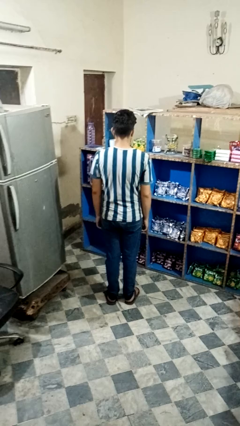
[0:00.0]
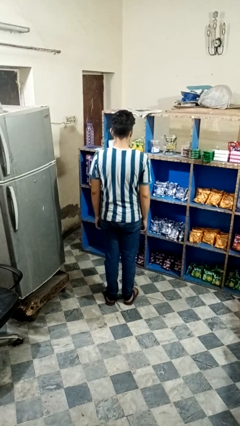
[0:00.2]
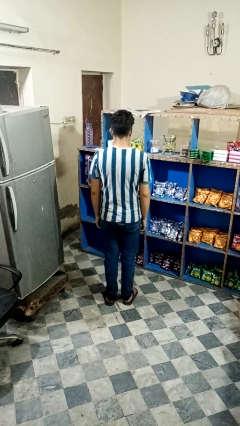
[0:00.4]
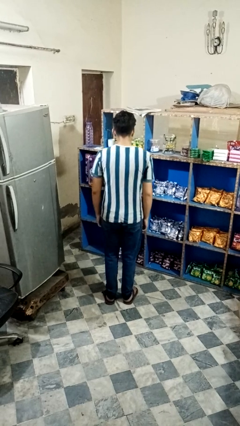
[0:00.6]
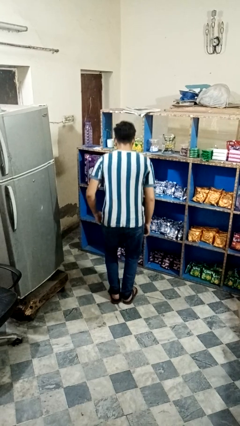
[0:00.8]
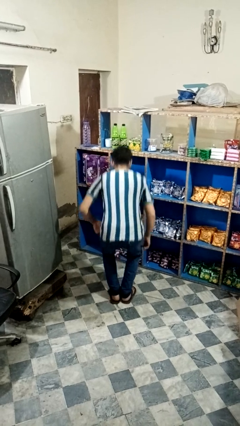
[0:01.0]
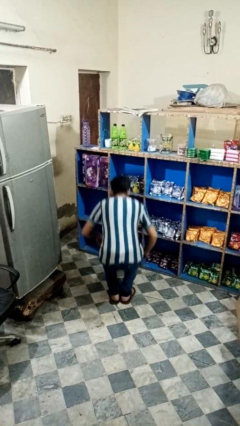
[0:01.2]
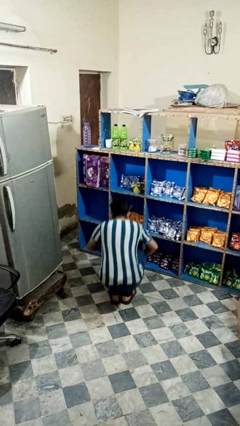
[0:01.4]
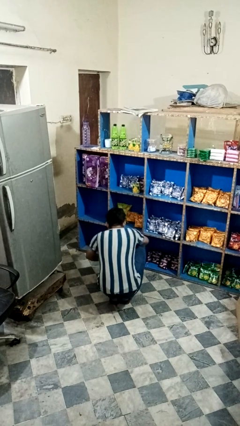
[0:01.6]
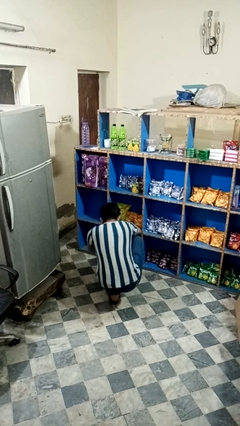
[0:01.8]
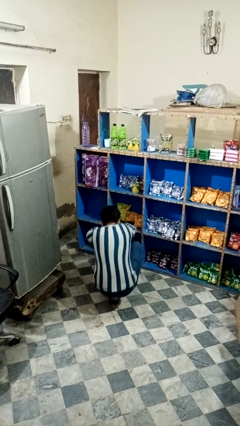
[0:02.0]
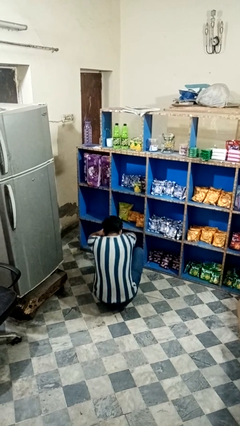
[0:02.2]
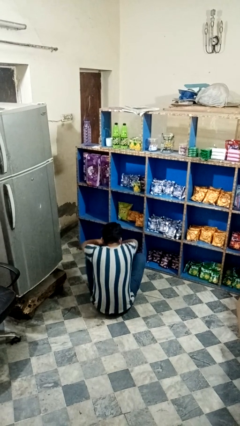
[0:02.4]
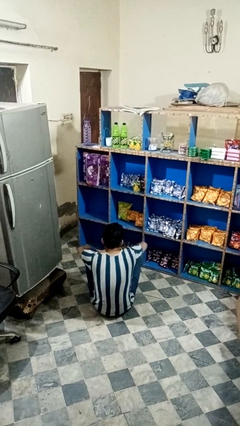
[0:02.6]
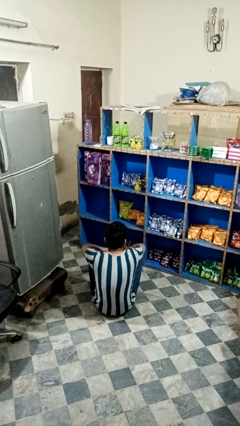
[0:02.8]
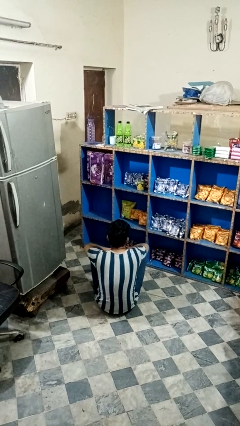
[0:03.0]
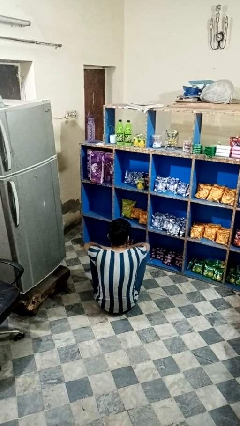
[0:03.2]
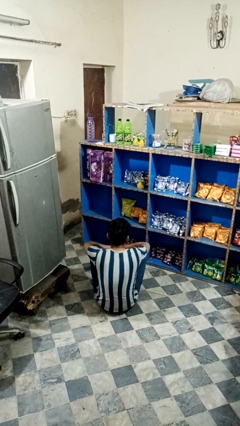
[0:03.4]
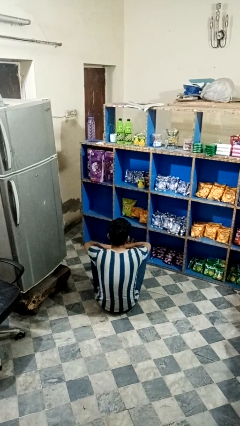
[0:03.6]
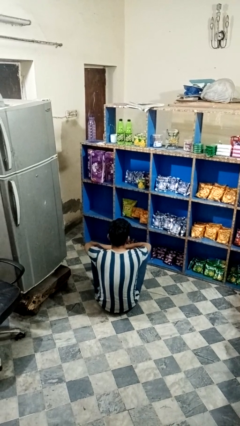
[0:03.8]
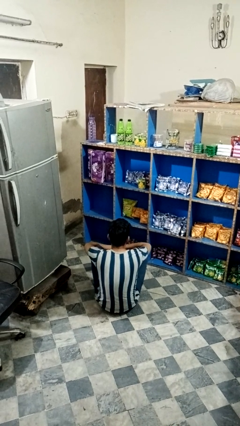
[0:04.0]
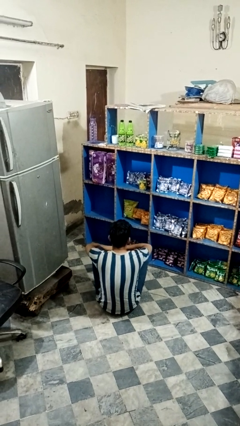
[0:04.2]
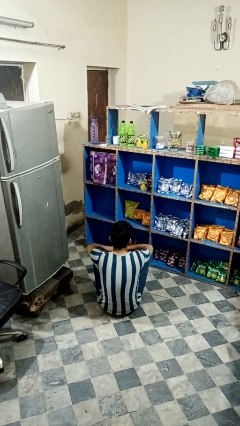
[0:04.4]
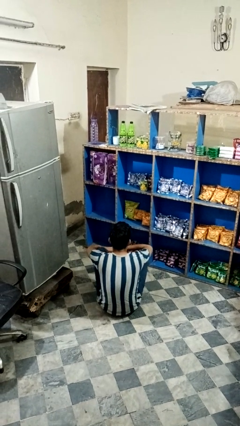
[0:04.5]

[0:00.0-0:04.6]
person sits crisscross

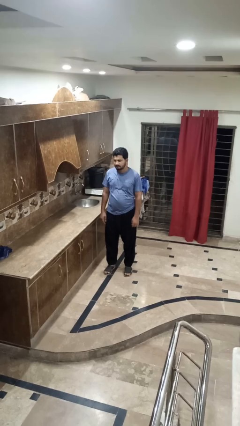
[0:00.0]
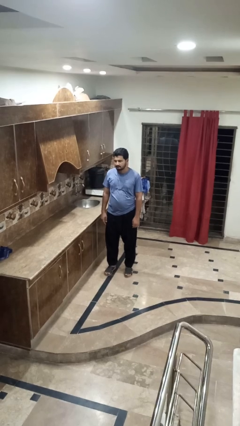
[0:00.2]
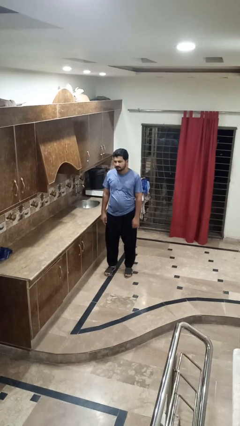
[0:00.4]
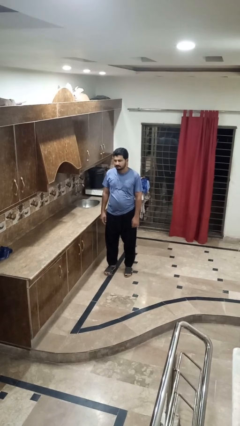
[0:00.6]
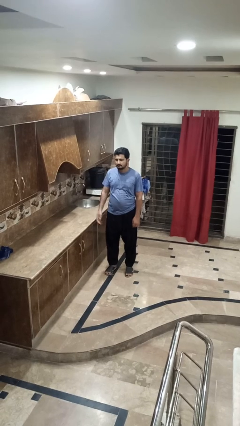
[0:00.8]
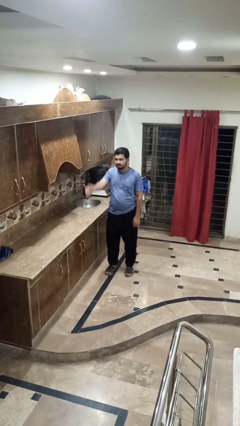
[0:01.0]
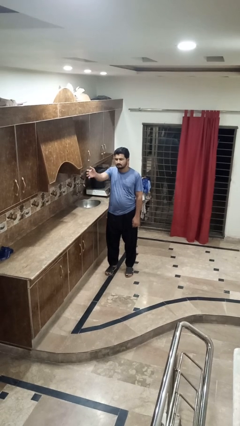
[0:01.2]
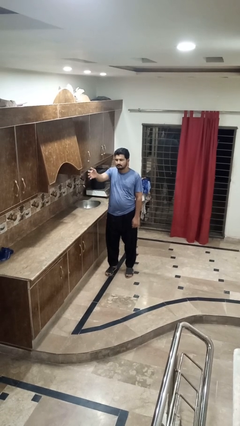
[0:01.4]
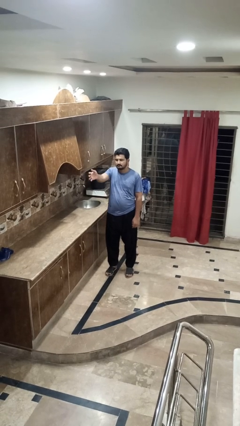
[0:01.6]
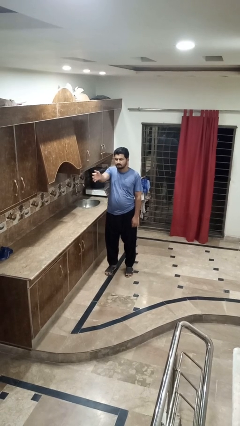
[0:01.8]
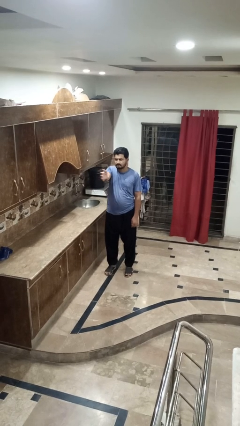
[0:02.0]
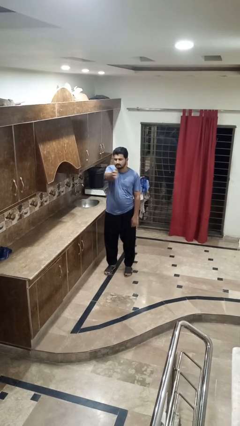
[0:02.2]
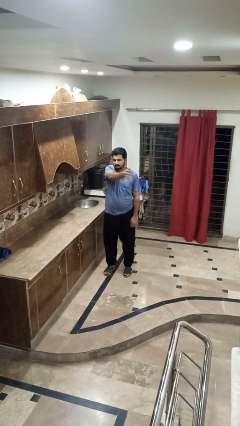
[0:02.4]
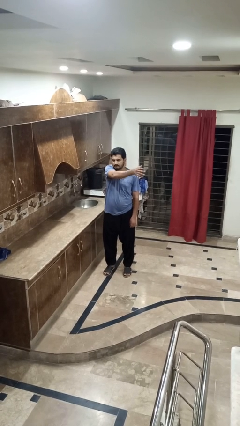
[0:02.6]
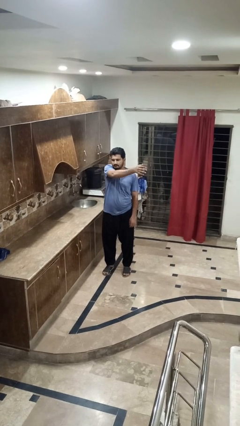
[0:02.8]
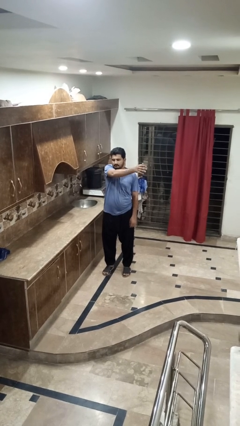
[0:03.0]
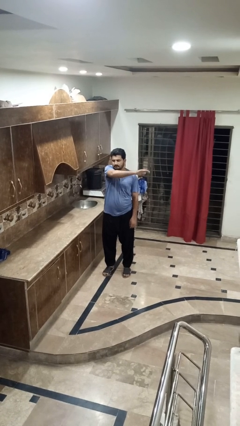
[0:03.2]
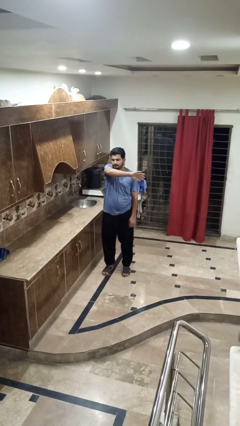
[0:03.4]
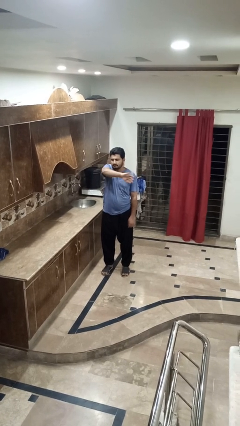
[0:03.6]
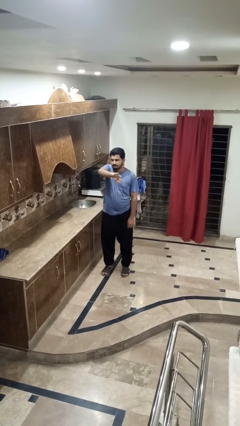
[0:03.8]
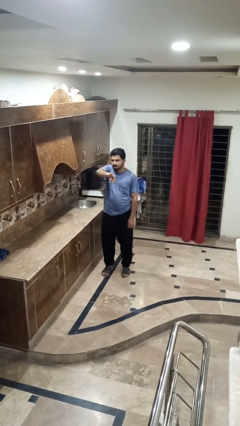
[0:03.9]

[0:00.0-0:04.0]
person gestures swipe left

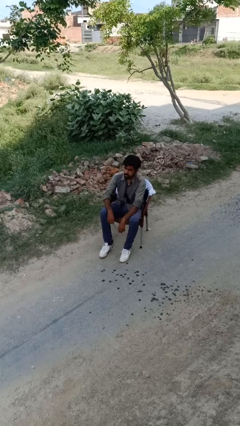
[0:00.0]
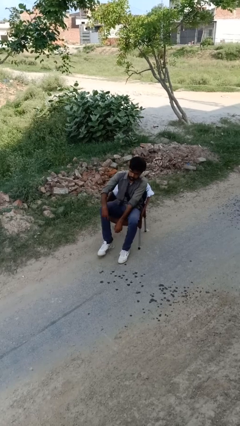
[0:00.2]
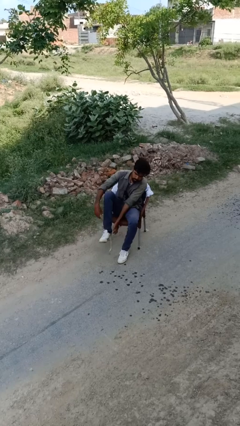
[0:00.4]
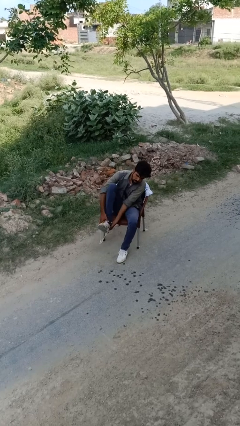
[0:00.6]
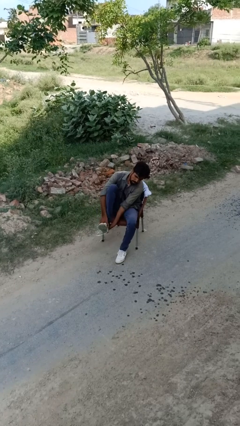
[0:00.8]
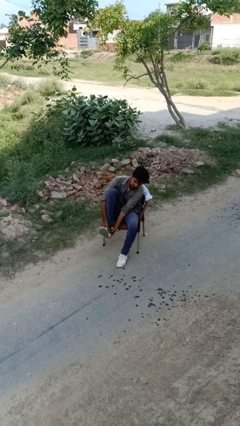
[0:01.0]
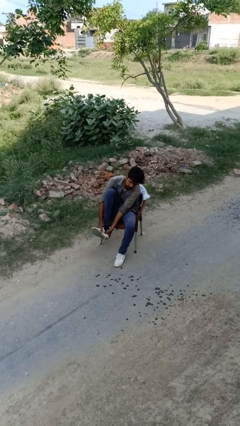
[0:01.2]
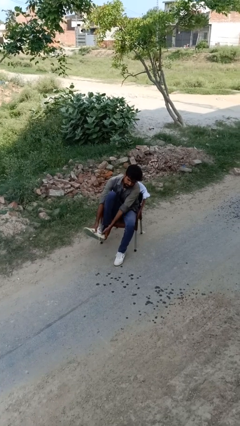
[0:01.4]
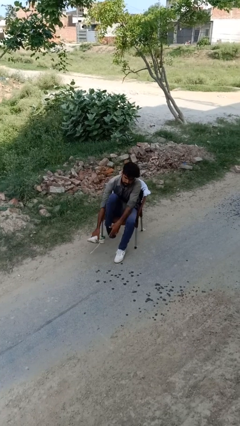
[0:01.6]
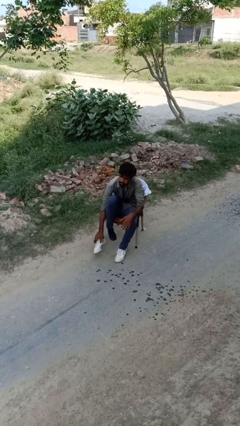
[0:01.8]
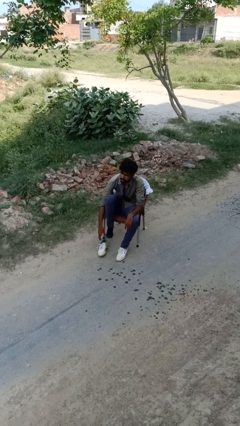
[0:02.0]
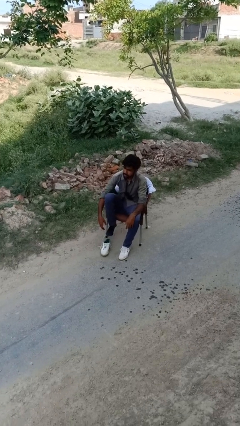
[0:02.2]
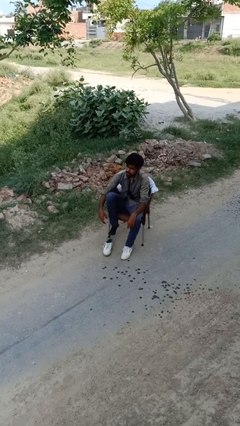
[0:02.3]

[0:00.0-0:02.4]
person takes off shoes

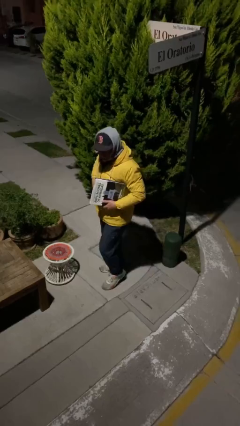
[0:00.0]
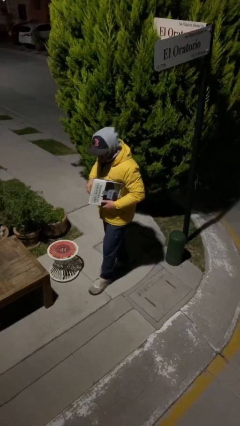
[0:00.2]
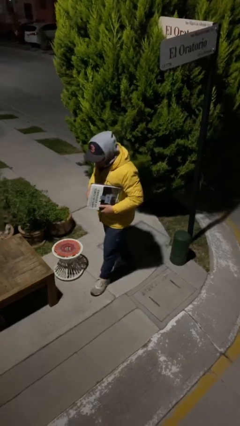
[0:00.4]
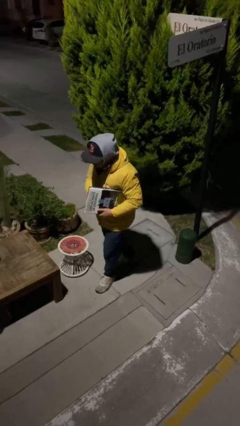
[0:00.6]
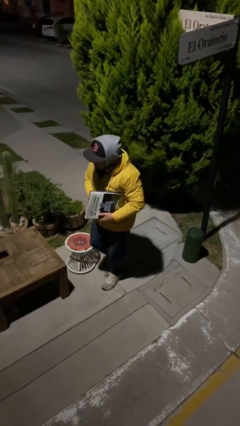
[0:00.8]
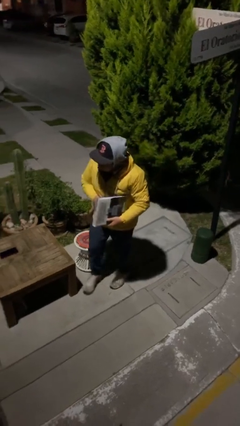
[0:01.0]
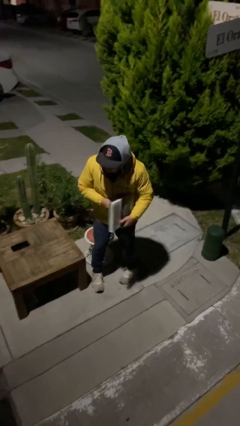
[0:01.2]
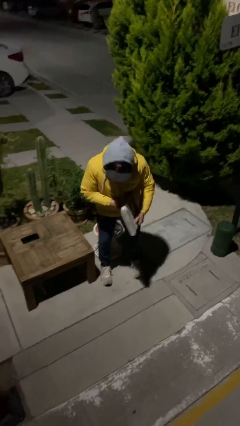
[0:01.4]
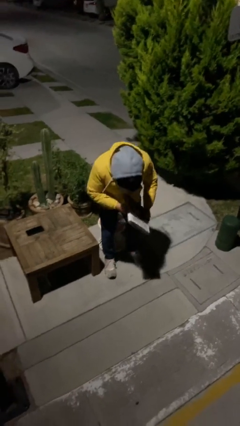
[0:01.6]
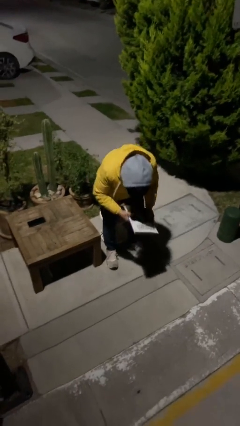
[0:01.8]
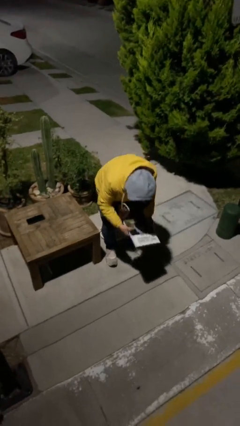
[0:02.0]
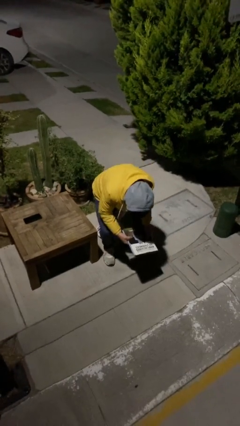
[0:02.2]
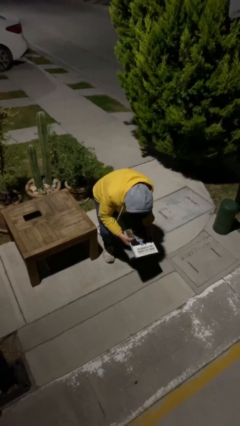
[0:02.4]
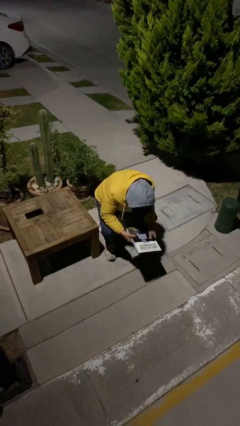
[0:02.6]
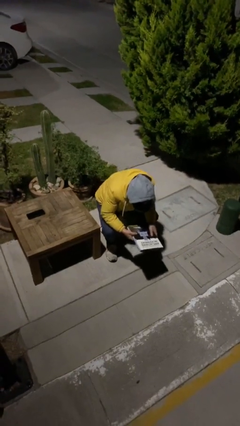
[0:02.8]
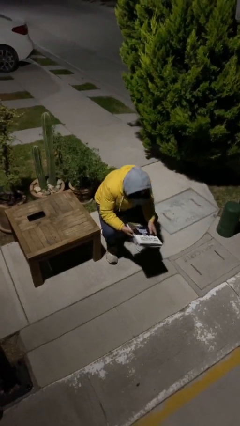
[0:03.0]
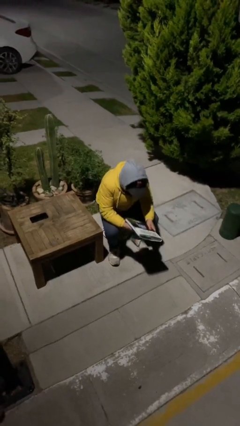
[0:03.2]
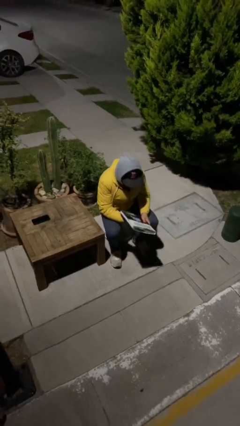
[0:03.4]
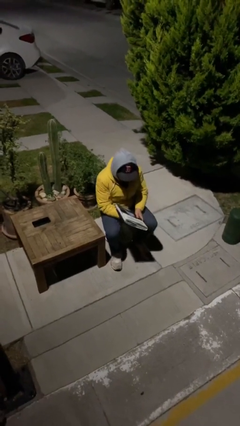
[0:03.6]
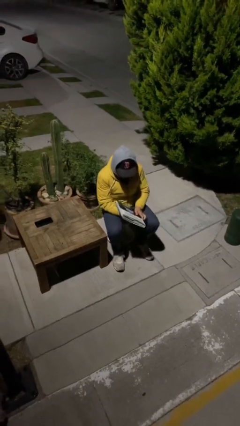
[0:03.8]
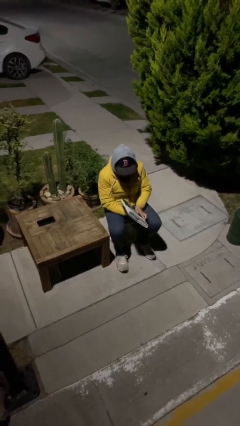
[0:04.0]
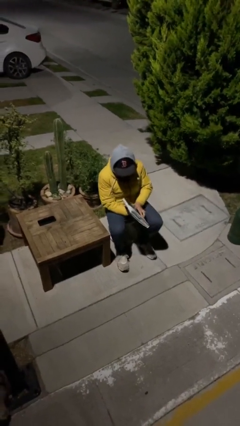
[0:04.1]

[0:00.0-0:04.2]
person sits down

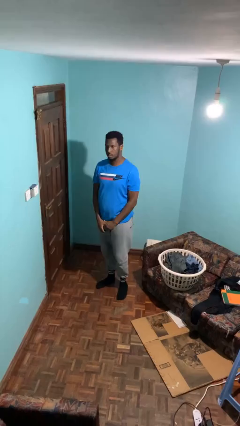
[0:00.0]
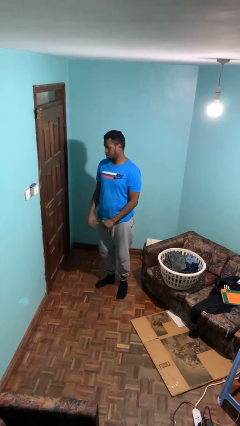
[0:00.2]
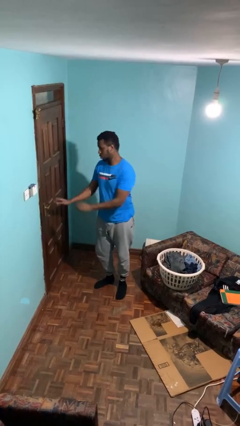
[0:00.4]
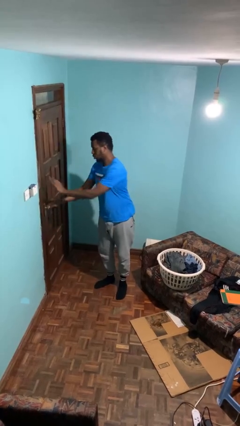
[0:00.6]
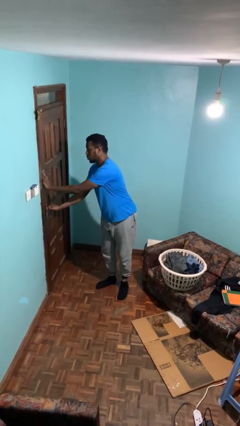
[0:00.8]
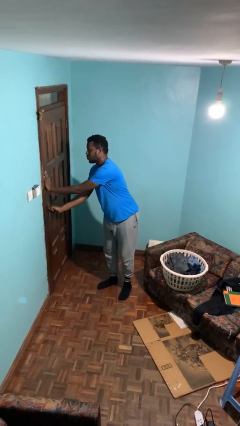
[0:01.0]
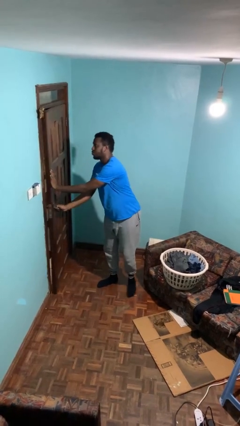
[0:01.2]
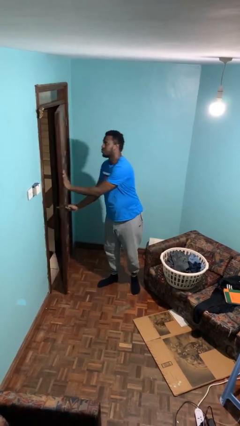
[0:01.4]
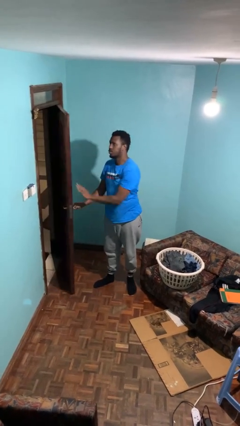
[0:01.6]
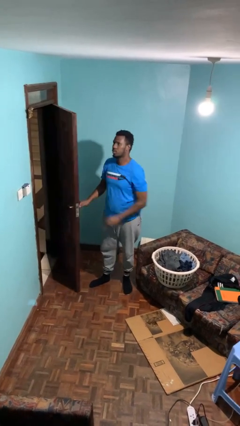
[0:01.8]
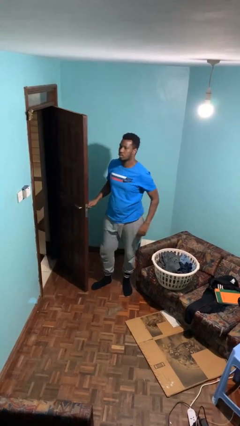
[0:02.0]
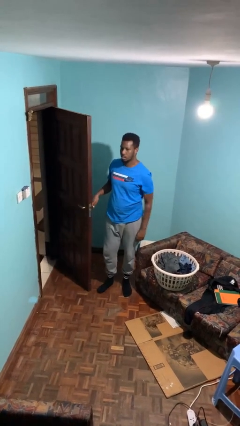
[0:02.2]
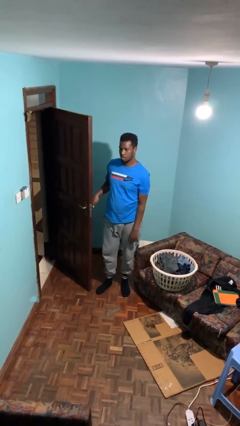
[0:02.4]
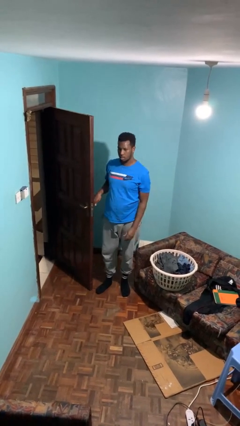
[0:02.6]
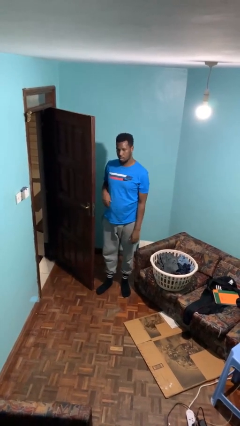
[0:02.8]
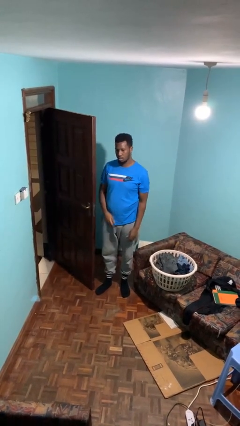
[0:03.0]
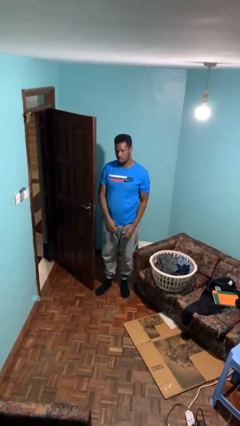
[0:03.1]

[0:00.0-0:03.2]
person opens facility door
